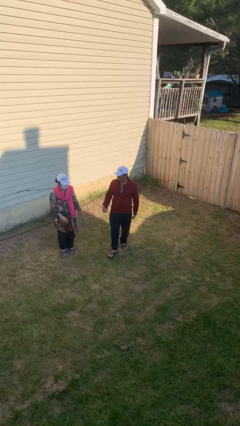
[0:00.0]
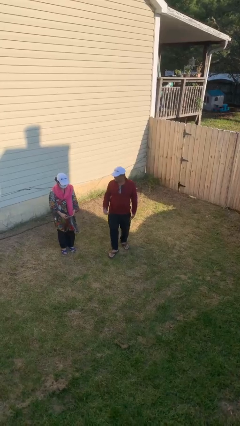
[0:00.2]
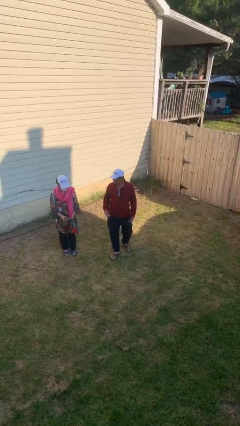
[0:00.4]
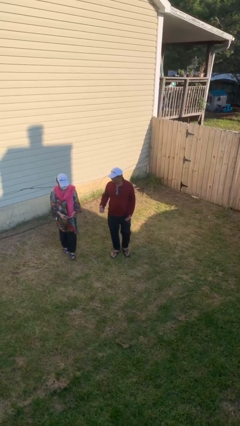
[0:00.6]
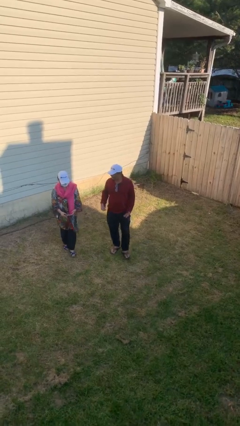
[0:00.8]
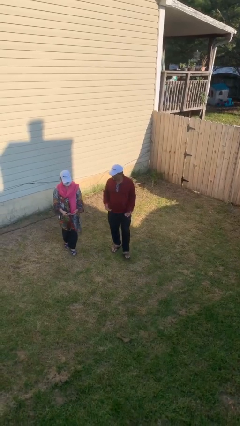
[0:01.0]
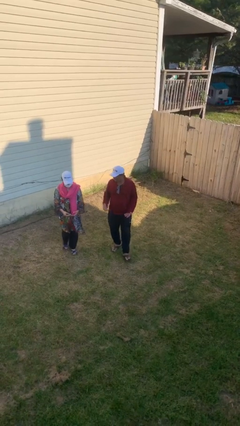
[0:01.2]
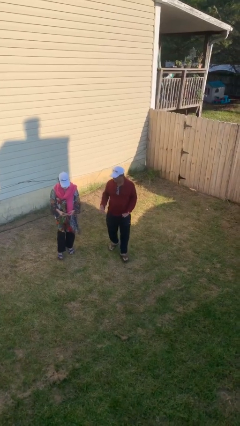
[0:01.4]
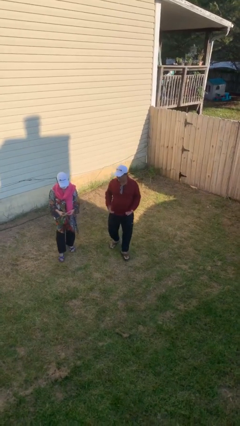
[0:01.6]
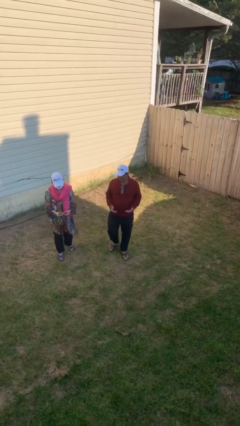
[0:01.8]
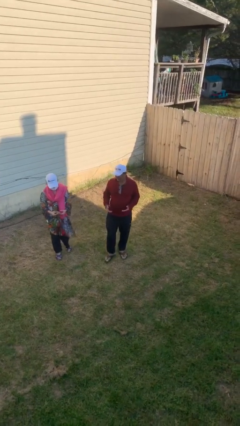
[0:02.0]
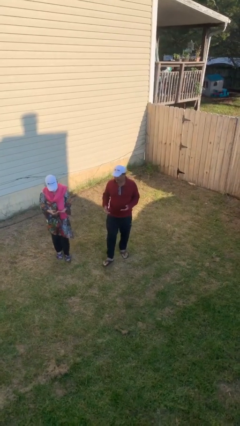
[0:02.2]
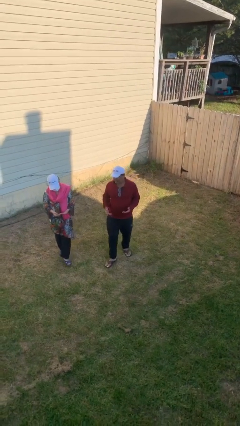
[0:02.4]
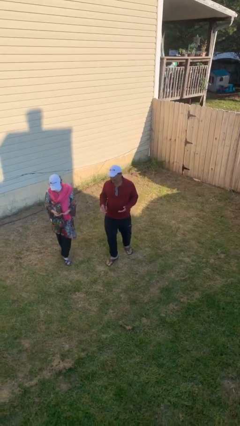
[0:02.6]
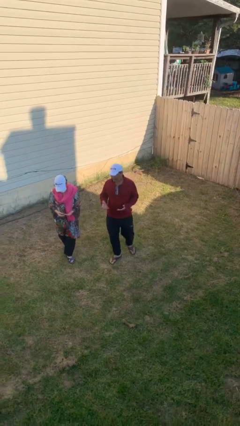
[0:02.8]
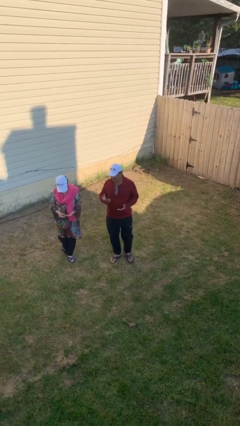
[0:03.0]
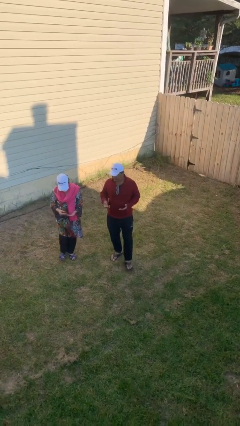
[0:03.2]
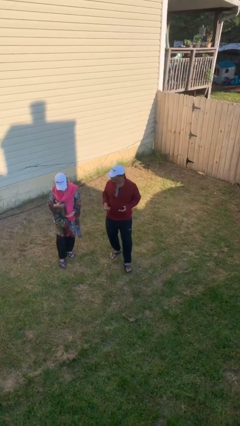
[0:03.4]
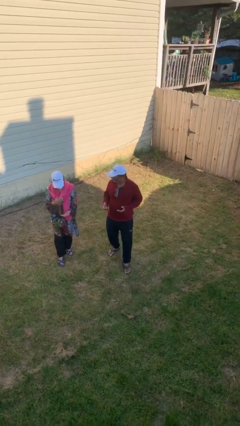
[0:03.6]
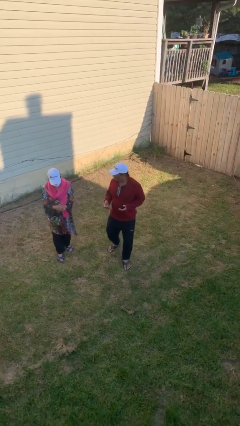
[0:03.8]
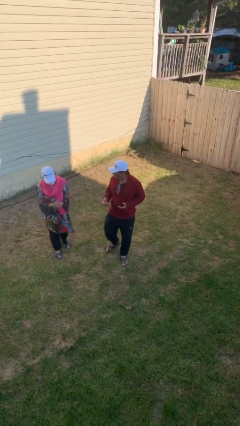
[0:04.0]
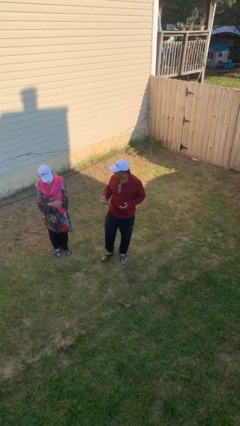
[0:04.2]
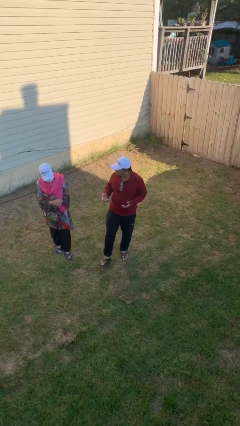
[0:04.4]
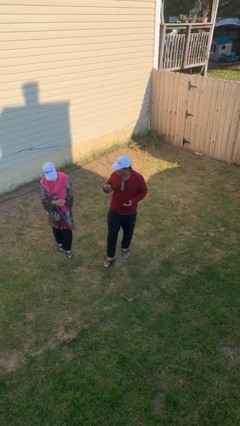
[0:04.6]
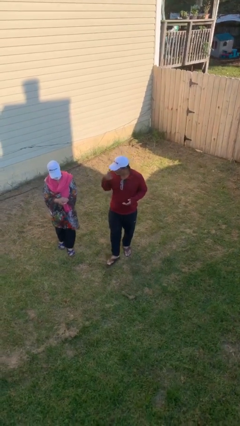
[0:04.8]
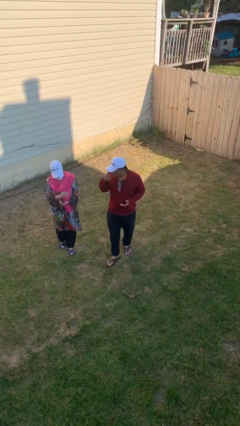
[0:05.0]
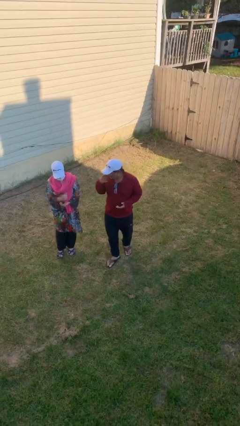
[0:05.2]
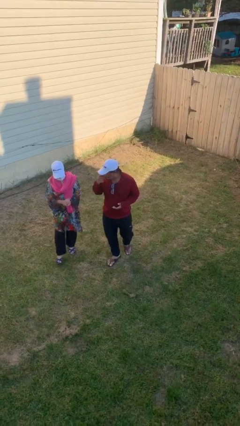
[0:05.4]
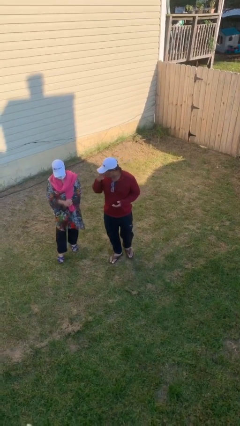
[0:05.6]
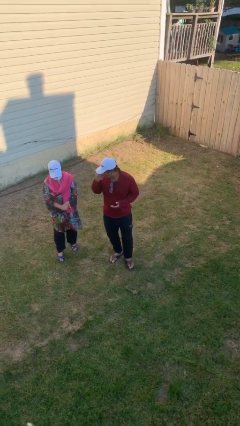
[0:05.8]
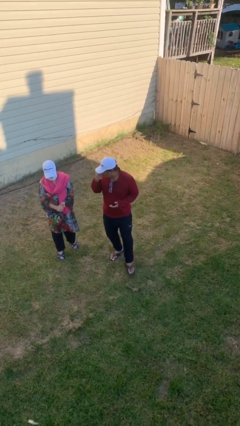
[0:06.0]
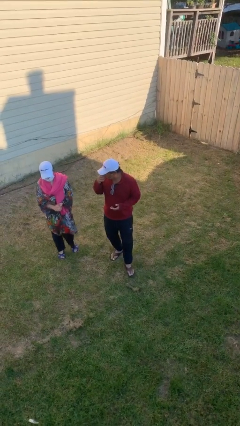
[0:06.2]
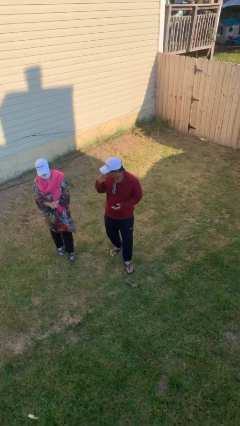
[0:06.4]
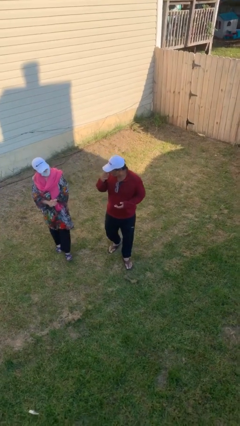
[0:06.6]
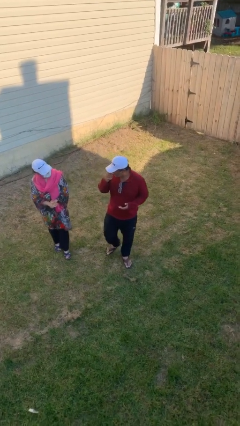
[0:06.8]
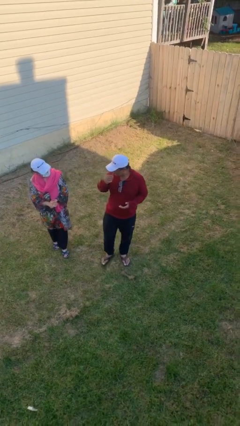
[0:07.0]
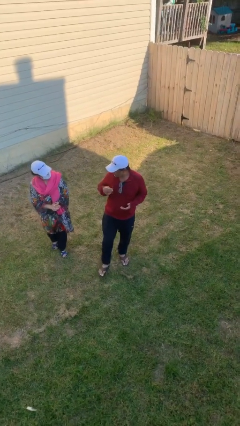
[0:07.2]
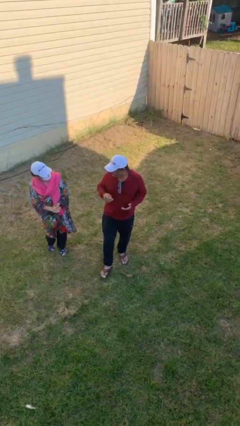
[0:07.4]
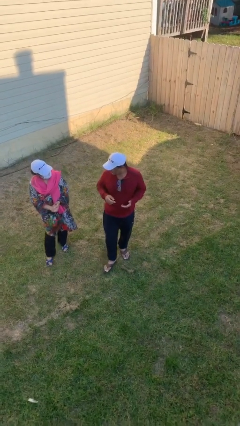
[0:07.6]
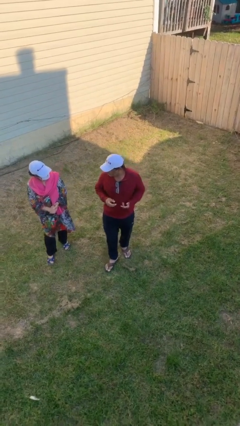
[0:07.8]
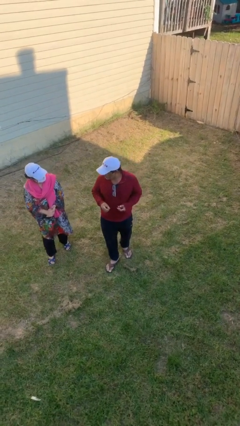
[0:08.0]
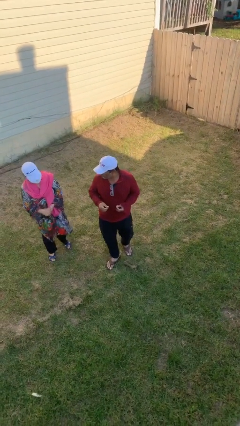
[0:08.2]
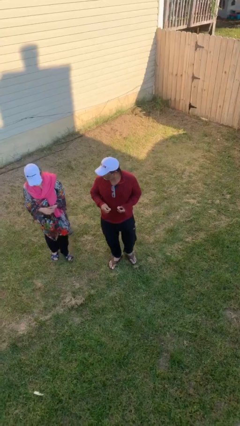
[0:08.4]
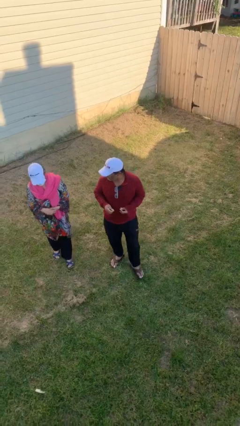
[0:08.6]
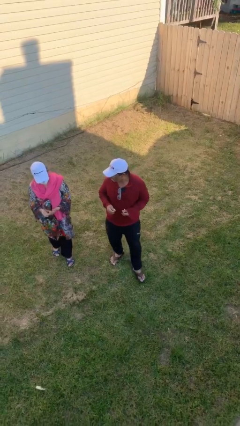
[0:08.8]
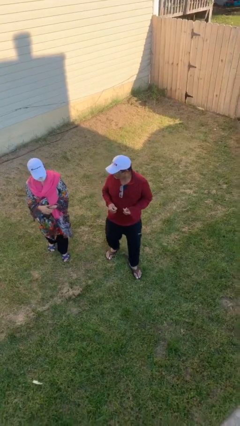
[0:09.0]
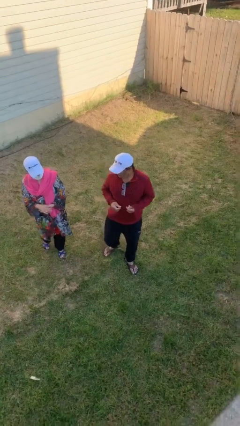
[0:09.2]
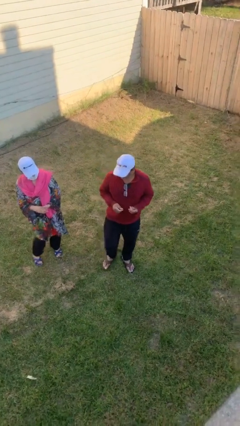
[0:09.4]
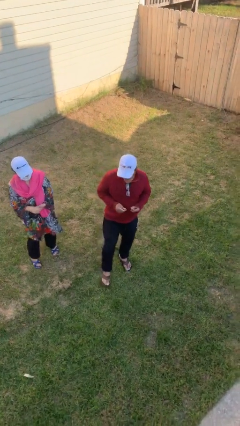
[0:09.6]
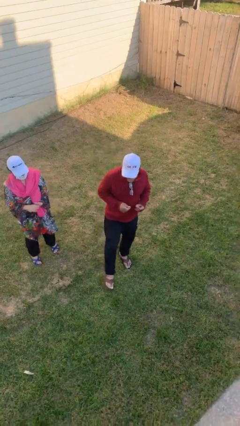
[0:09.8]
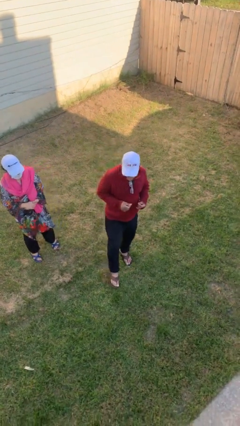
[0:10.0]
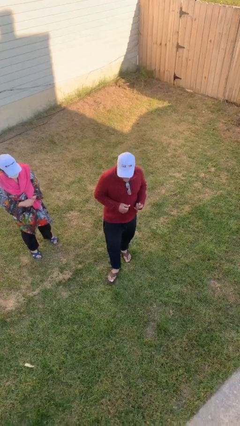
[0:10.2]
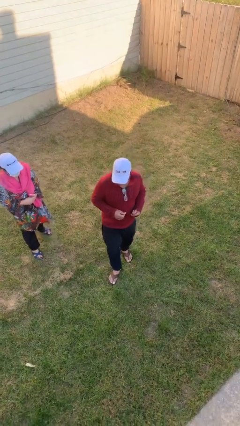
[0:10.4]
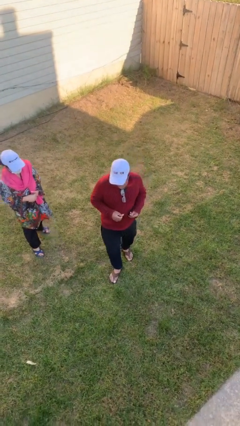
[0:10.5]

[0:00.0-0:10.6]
person talks to person

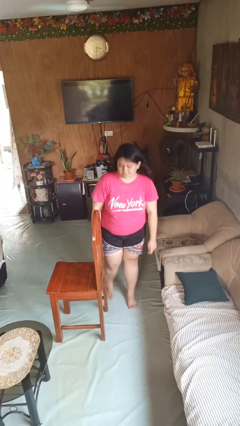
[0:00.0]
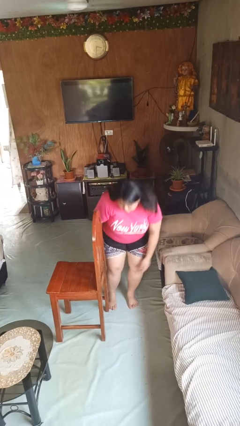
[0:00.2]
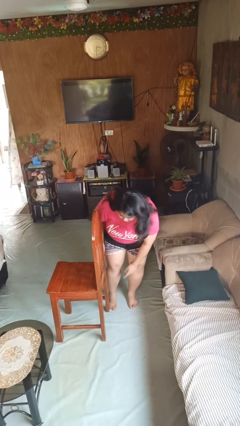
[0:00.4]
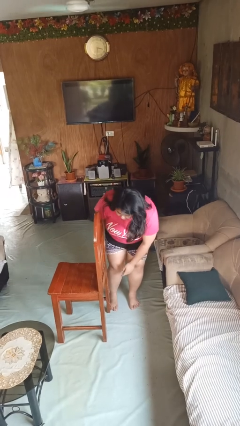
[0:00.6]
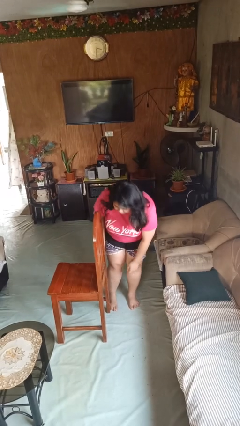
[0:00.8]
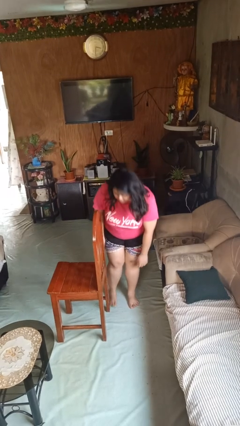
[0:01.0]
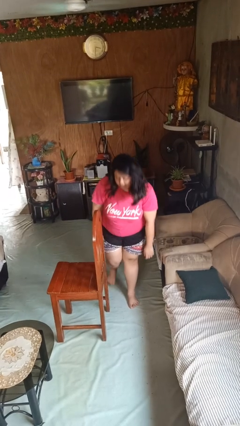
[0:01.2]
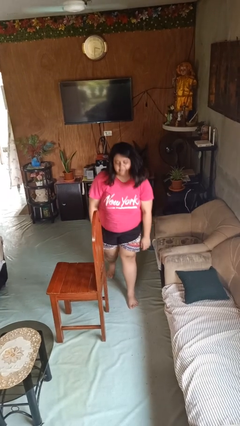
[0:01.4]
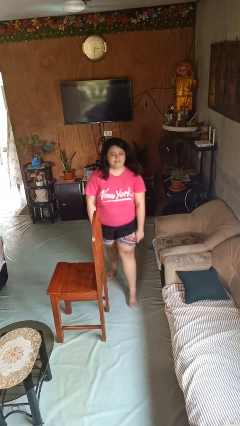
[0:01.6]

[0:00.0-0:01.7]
person stubs toe

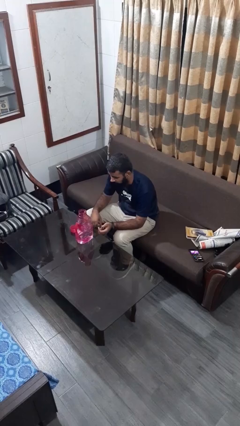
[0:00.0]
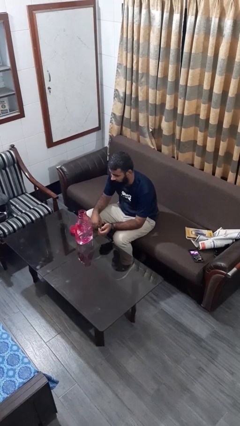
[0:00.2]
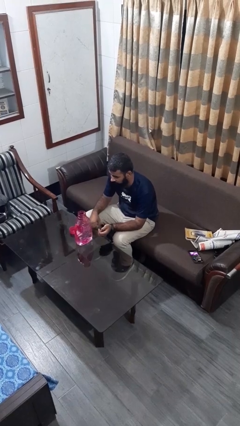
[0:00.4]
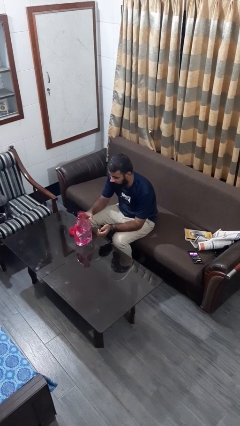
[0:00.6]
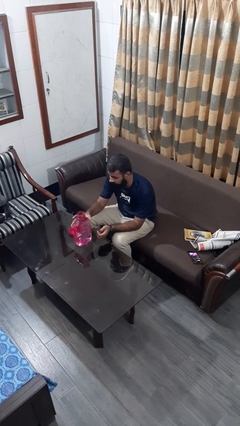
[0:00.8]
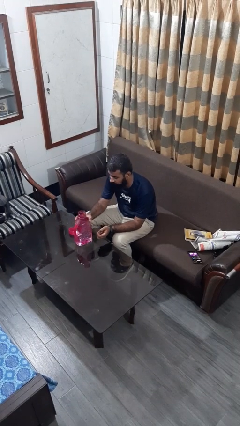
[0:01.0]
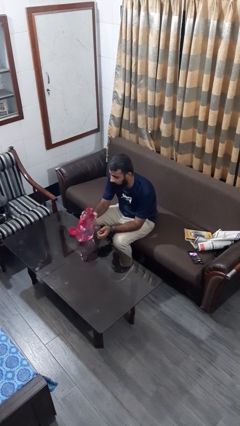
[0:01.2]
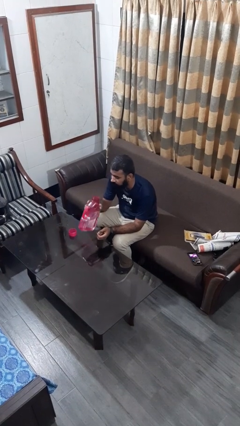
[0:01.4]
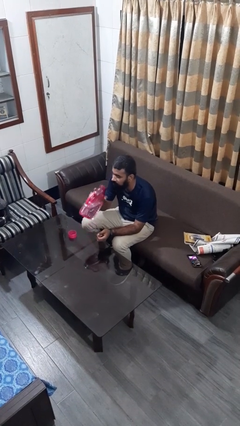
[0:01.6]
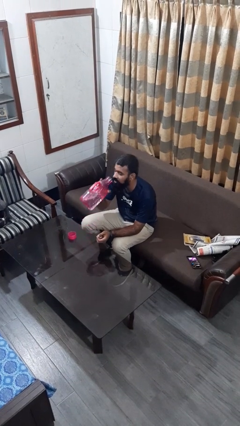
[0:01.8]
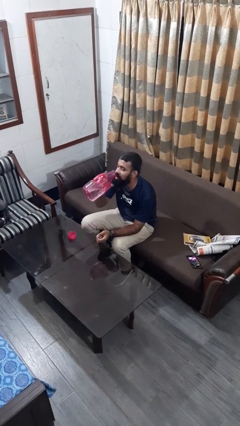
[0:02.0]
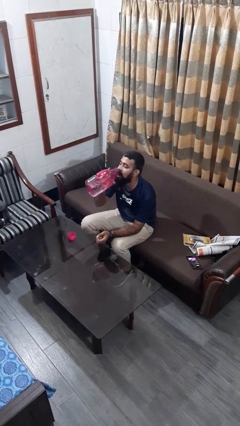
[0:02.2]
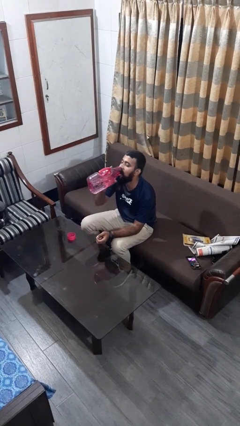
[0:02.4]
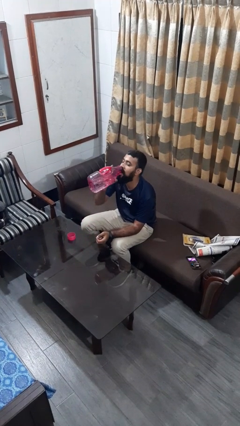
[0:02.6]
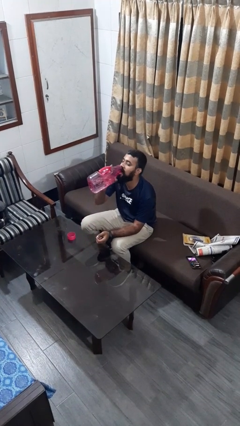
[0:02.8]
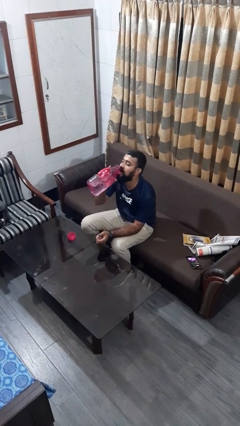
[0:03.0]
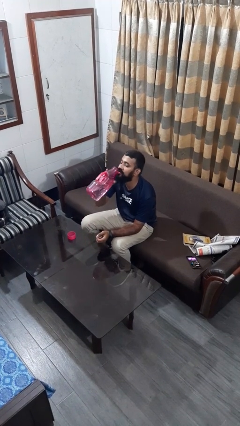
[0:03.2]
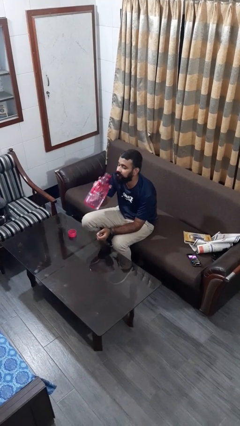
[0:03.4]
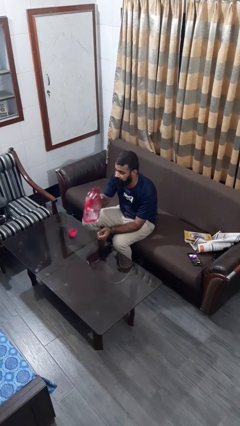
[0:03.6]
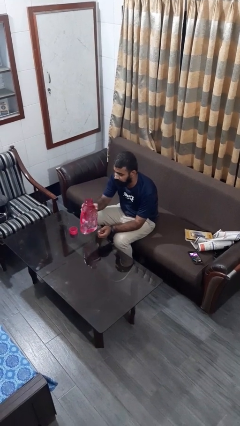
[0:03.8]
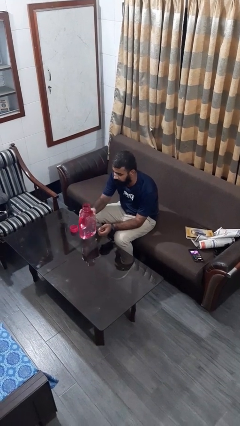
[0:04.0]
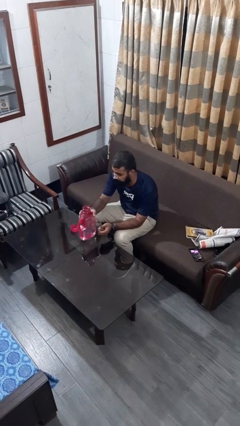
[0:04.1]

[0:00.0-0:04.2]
person drinks from bottle

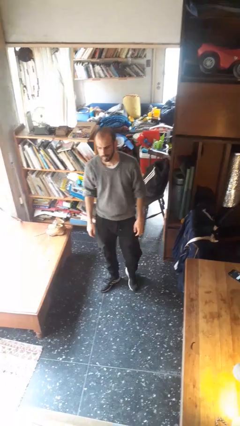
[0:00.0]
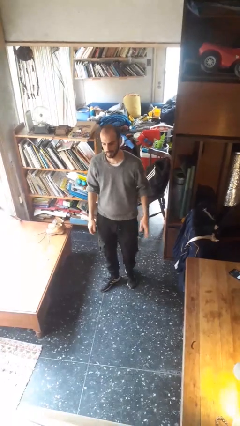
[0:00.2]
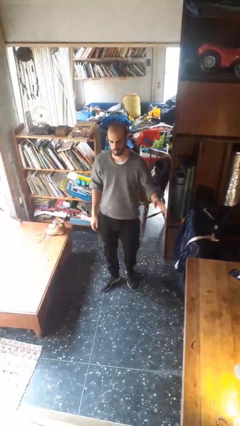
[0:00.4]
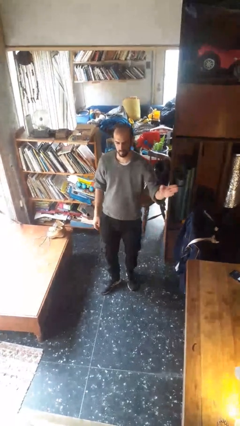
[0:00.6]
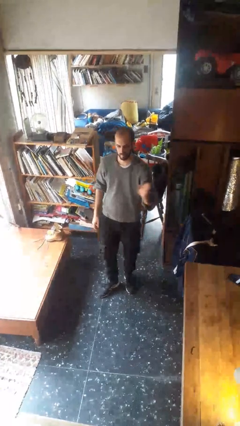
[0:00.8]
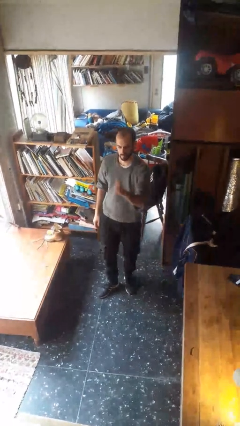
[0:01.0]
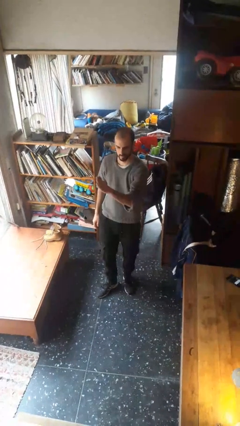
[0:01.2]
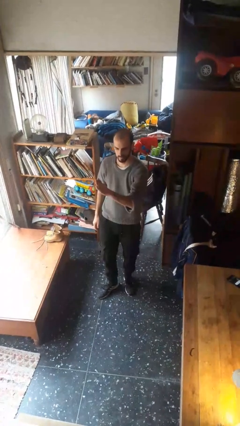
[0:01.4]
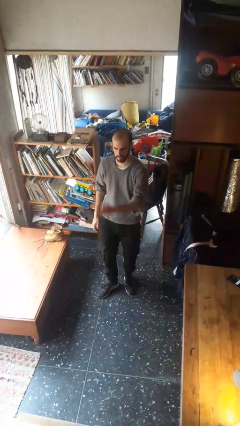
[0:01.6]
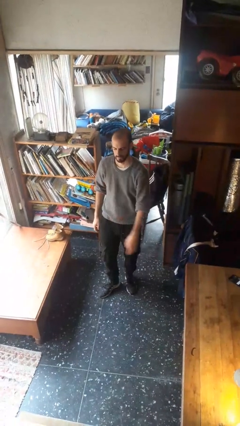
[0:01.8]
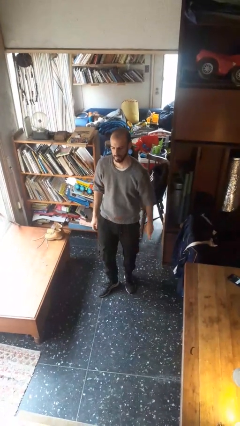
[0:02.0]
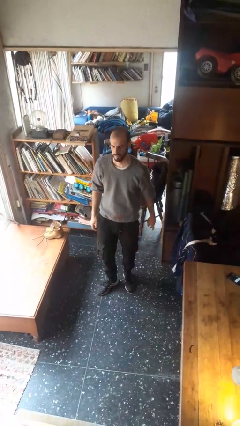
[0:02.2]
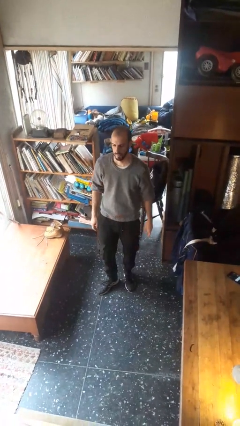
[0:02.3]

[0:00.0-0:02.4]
person gestures swipe right
